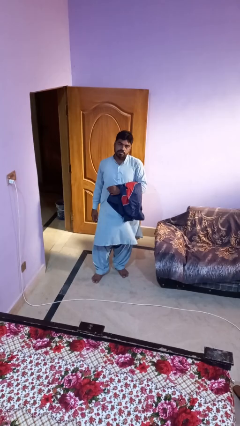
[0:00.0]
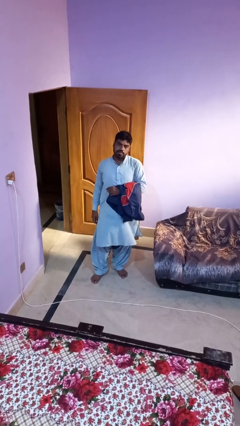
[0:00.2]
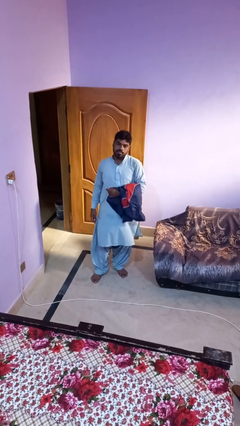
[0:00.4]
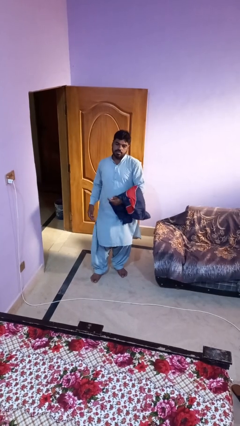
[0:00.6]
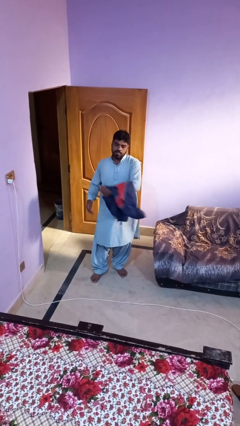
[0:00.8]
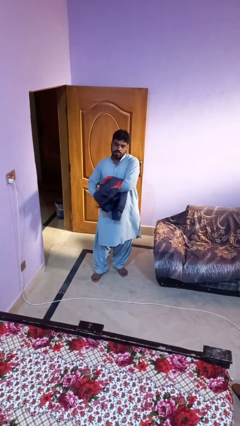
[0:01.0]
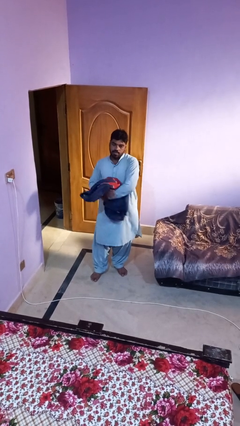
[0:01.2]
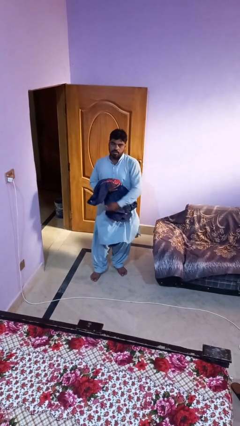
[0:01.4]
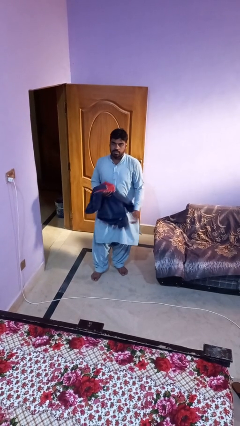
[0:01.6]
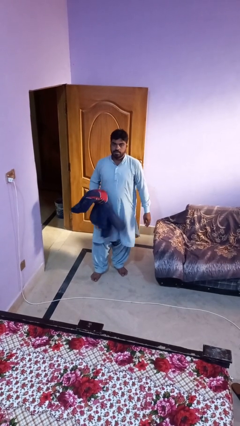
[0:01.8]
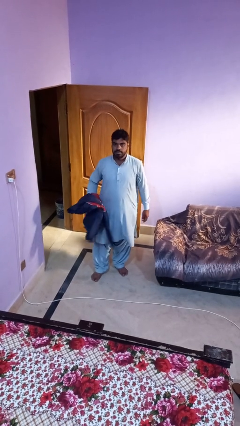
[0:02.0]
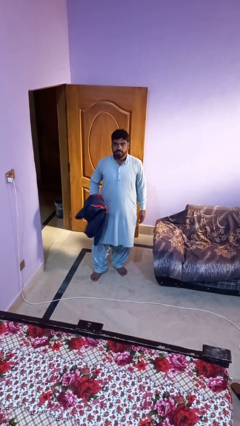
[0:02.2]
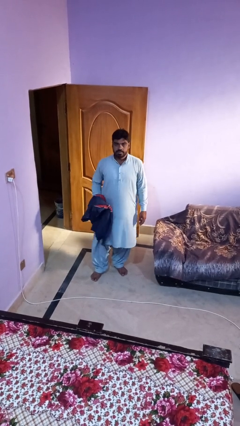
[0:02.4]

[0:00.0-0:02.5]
person unties jacket around waist

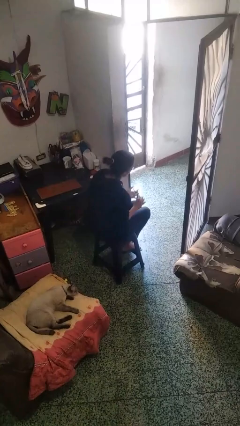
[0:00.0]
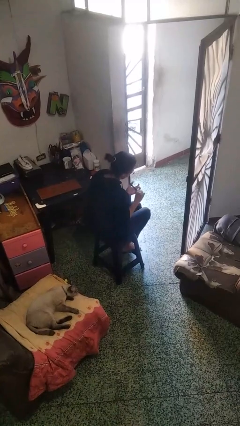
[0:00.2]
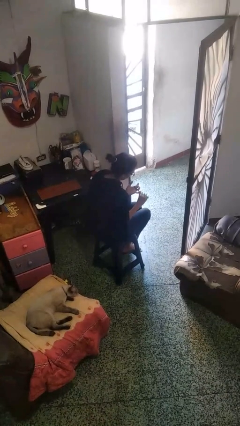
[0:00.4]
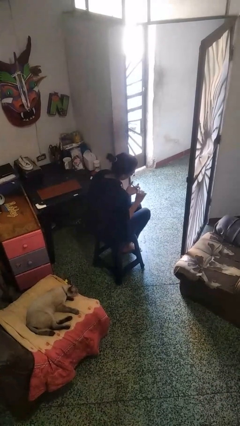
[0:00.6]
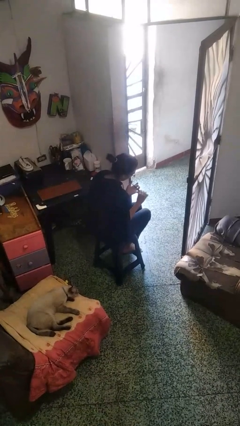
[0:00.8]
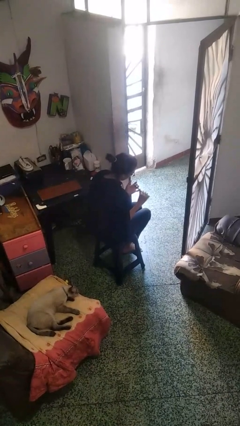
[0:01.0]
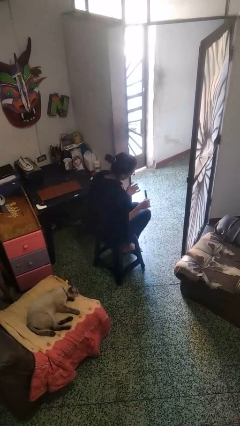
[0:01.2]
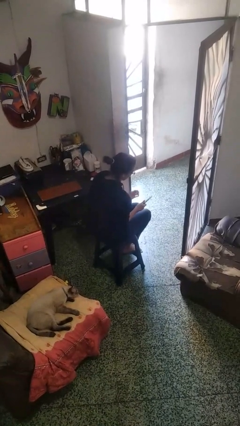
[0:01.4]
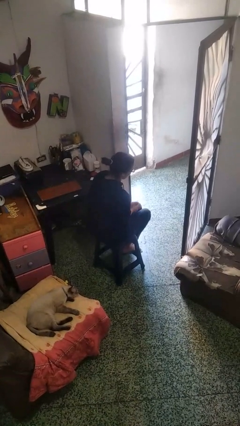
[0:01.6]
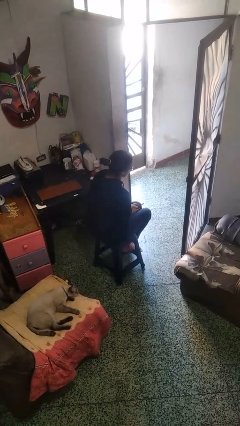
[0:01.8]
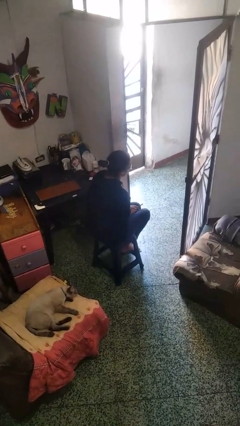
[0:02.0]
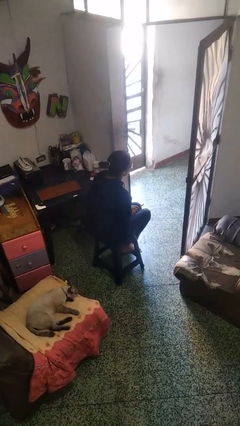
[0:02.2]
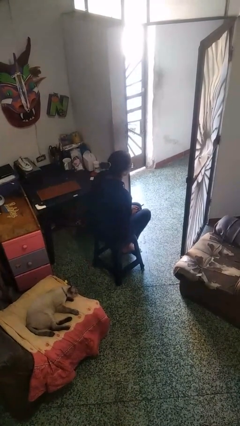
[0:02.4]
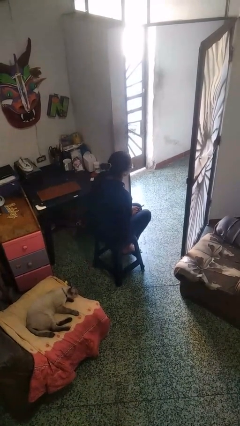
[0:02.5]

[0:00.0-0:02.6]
person files fingernails

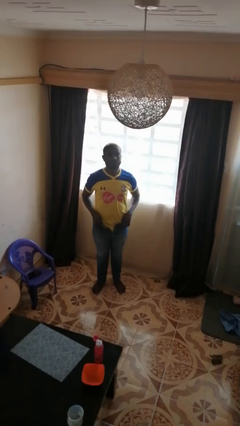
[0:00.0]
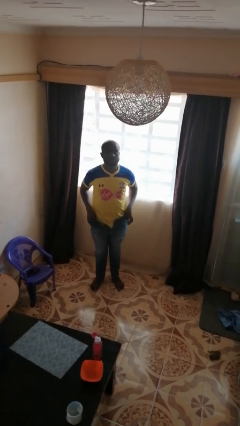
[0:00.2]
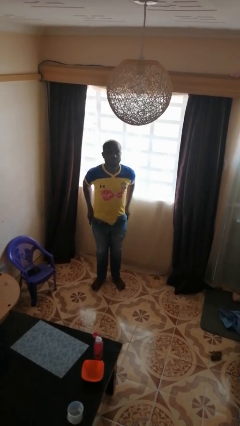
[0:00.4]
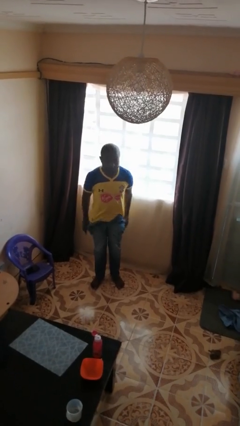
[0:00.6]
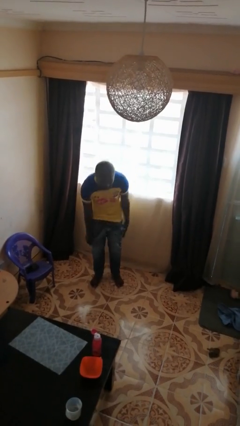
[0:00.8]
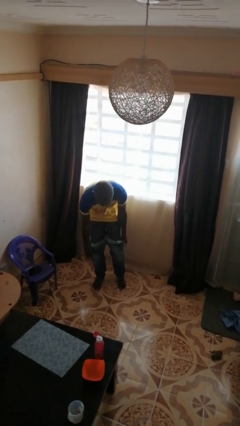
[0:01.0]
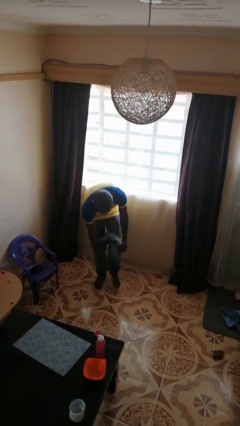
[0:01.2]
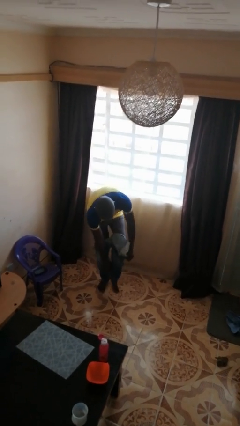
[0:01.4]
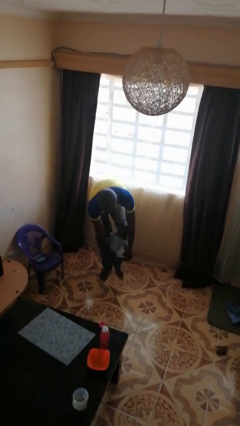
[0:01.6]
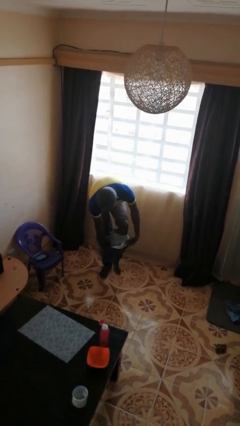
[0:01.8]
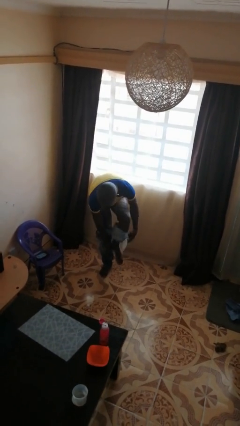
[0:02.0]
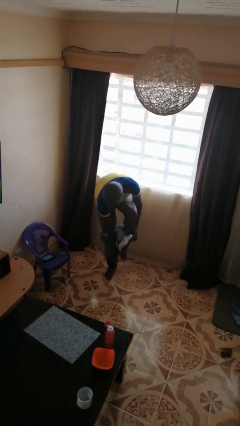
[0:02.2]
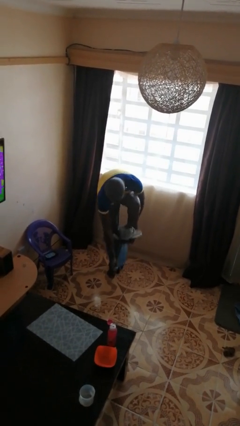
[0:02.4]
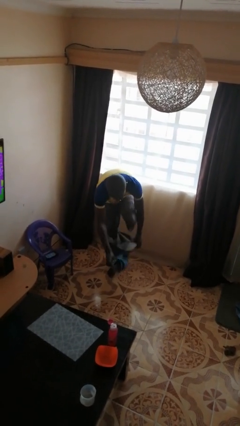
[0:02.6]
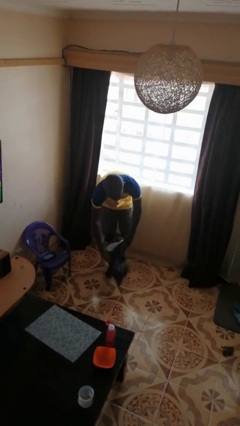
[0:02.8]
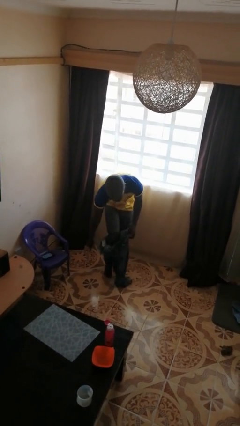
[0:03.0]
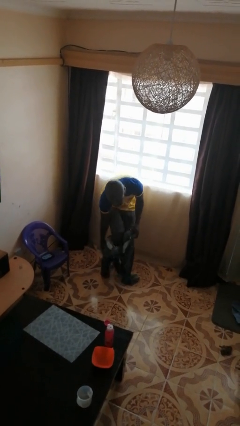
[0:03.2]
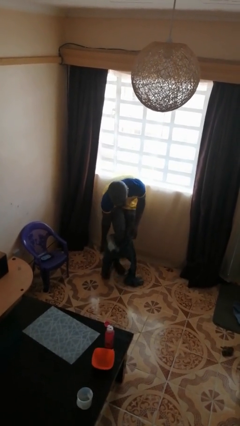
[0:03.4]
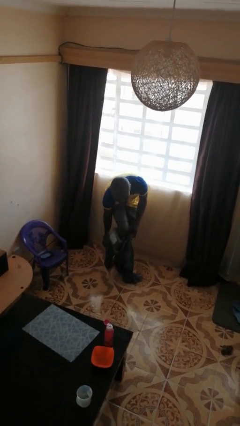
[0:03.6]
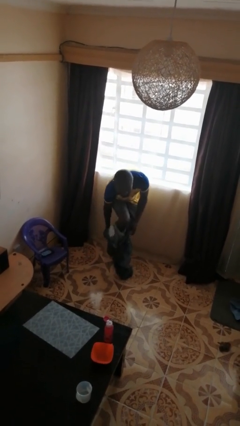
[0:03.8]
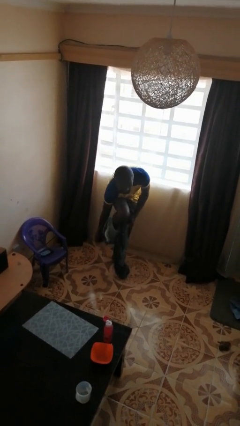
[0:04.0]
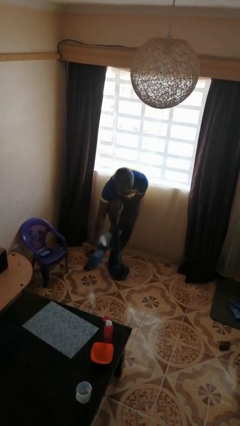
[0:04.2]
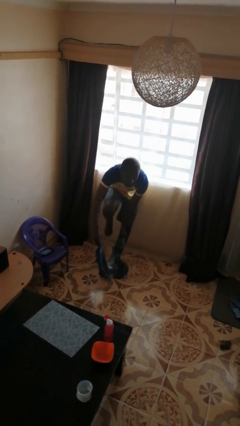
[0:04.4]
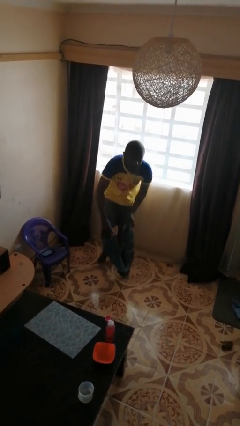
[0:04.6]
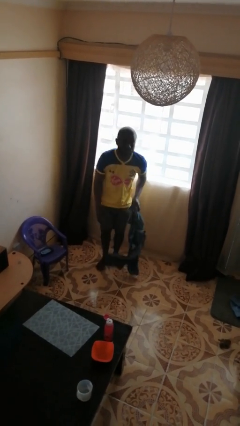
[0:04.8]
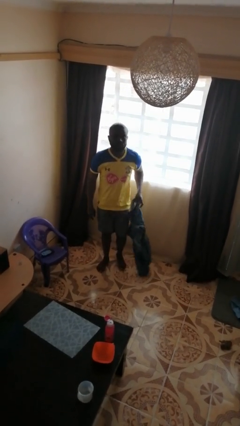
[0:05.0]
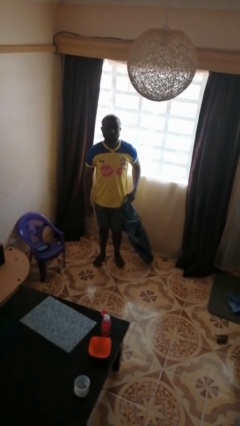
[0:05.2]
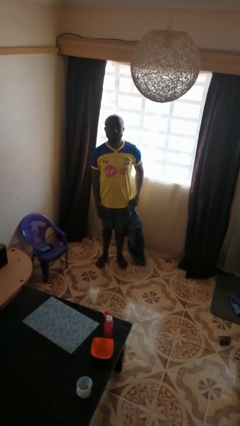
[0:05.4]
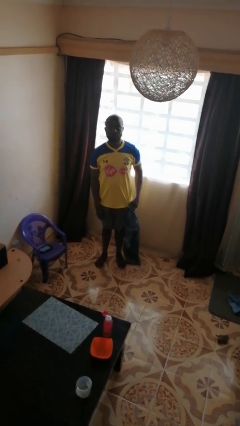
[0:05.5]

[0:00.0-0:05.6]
person takes off pants

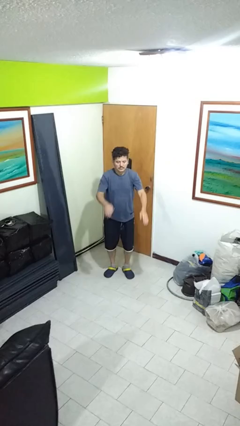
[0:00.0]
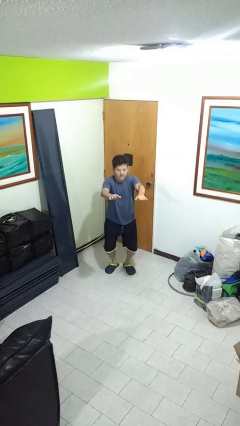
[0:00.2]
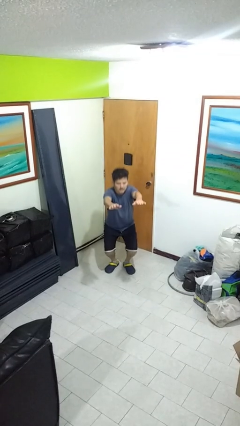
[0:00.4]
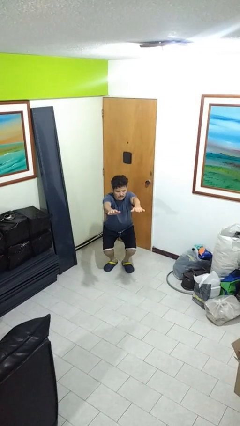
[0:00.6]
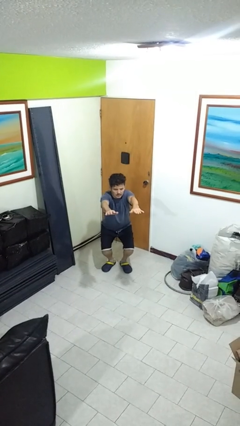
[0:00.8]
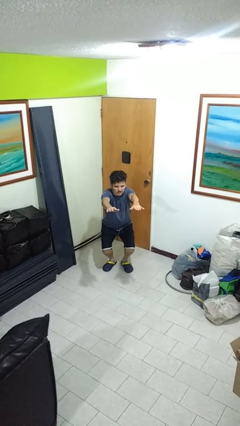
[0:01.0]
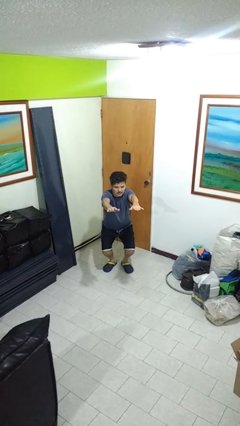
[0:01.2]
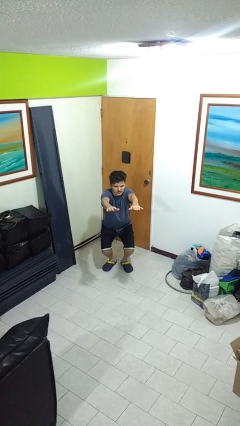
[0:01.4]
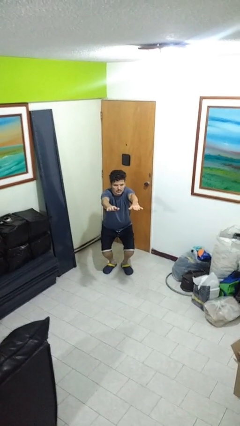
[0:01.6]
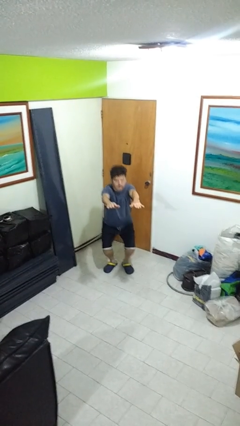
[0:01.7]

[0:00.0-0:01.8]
person squats

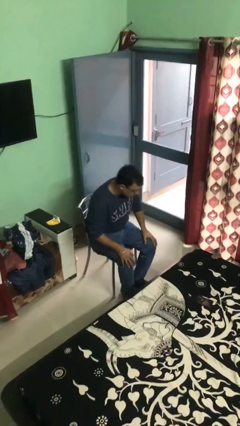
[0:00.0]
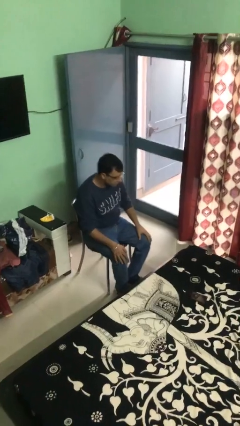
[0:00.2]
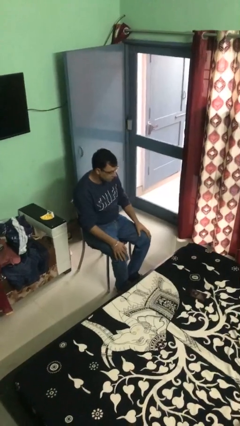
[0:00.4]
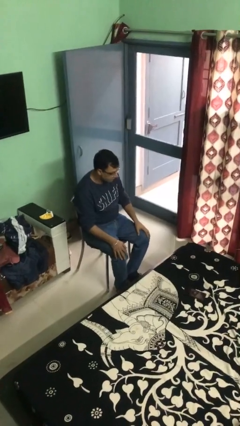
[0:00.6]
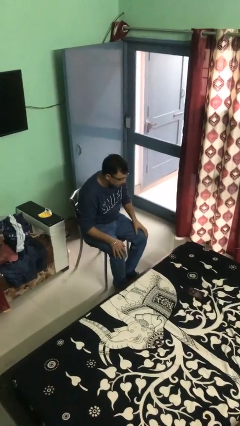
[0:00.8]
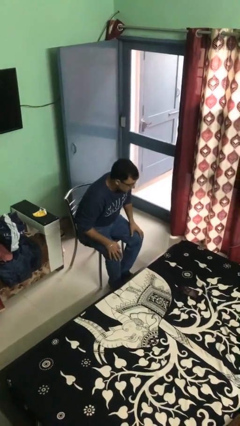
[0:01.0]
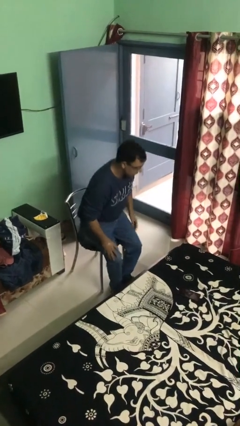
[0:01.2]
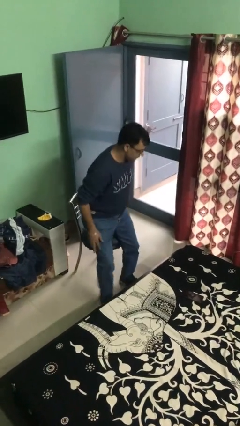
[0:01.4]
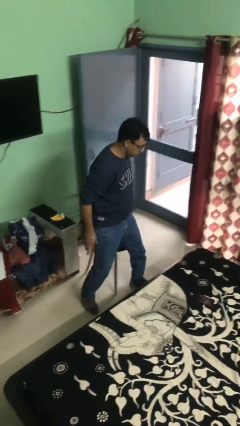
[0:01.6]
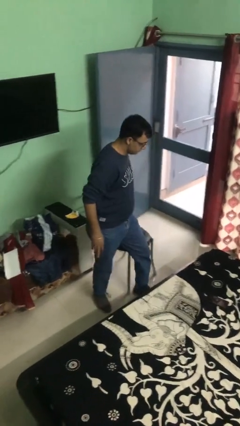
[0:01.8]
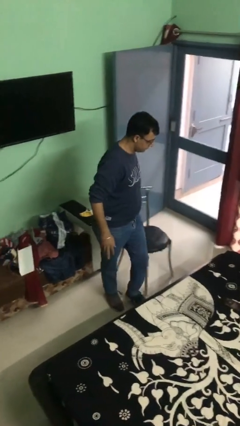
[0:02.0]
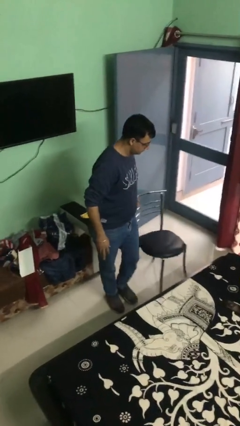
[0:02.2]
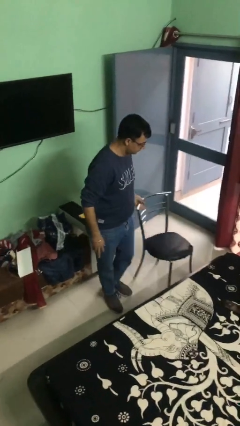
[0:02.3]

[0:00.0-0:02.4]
person stands up

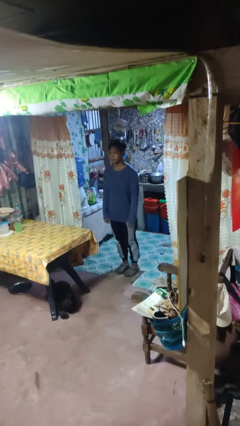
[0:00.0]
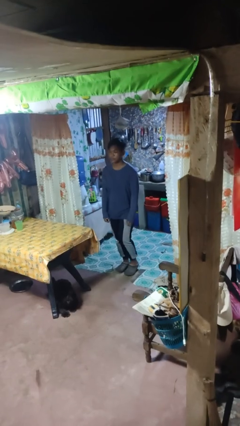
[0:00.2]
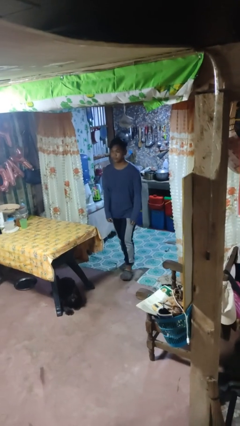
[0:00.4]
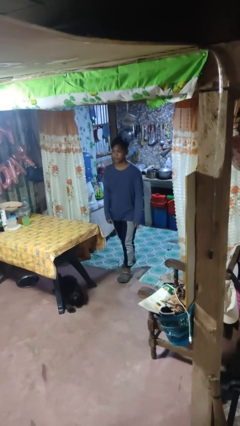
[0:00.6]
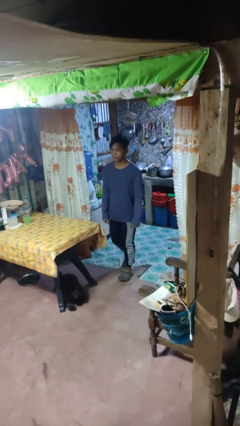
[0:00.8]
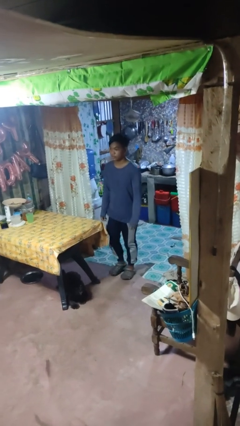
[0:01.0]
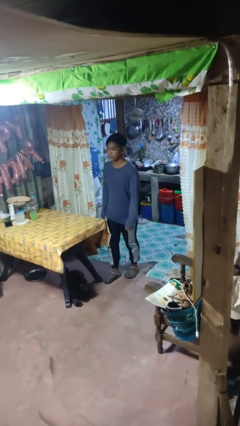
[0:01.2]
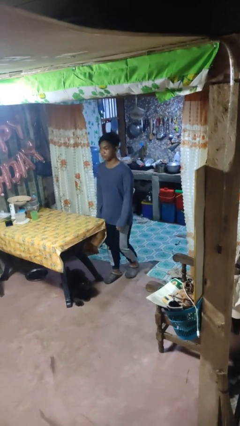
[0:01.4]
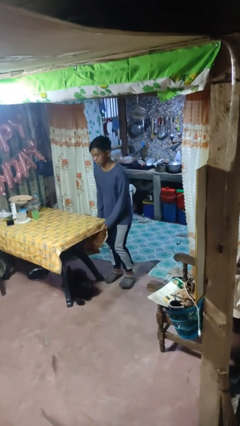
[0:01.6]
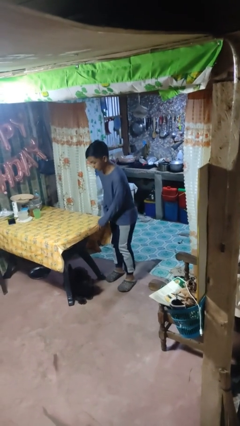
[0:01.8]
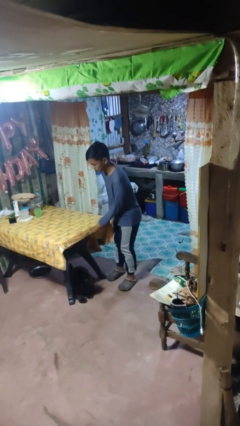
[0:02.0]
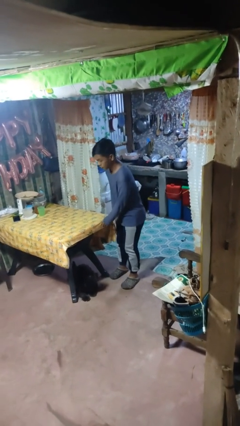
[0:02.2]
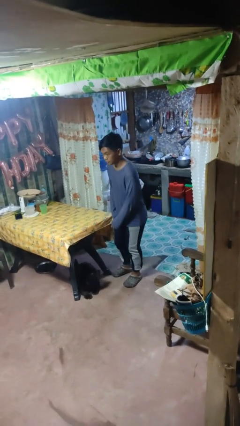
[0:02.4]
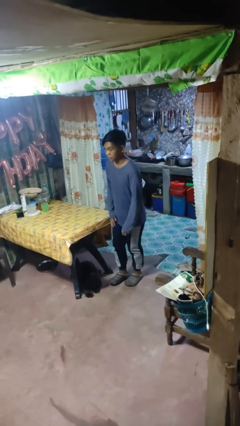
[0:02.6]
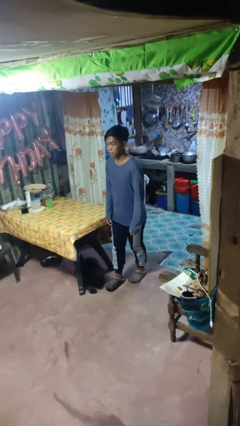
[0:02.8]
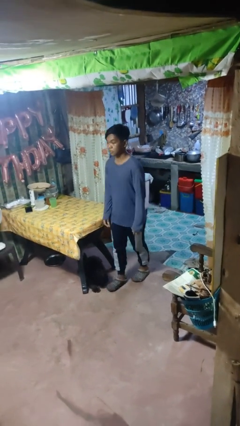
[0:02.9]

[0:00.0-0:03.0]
person bumps into table

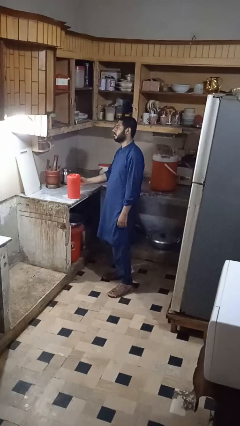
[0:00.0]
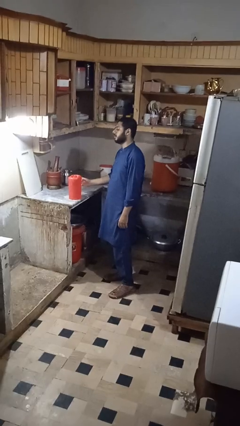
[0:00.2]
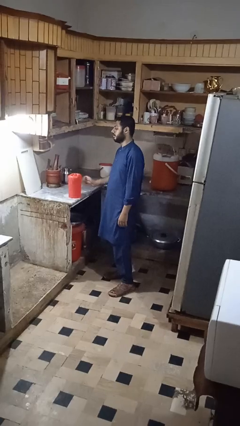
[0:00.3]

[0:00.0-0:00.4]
person picks up object from countertop
